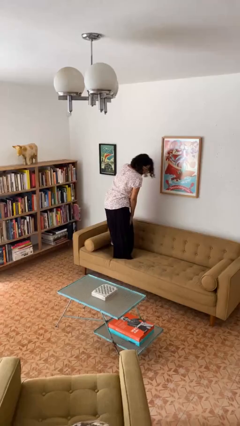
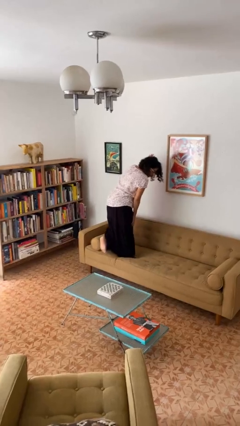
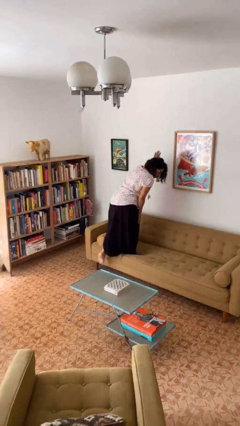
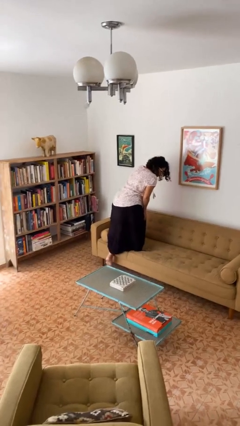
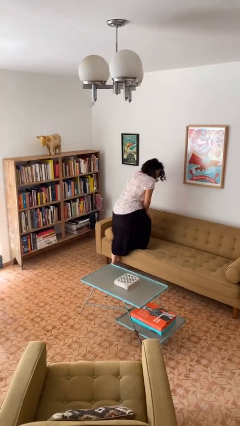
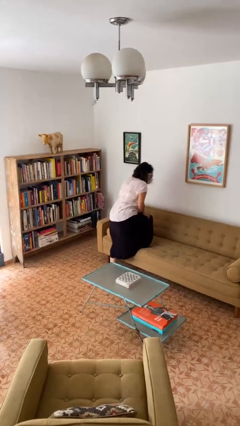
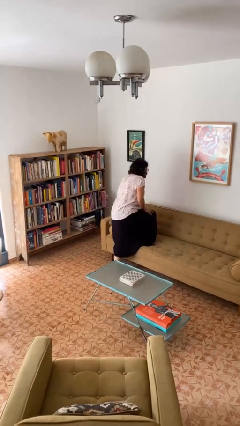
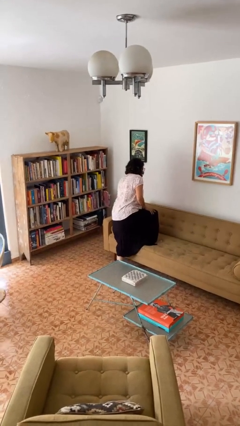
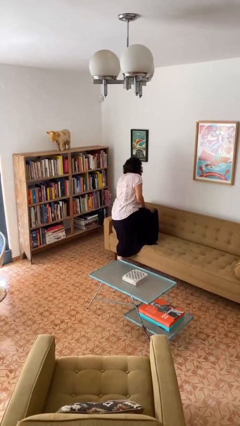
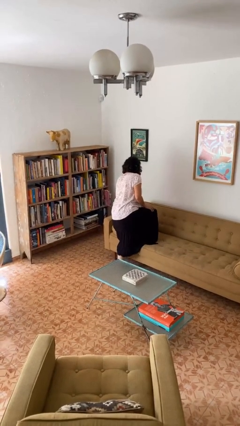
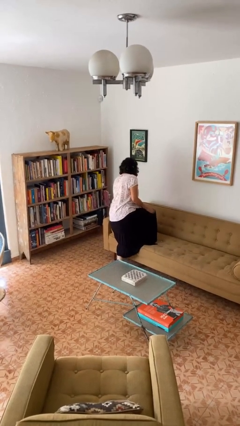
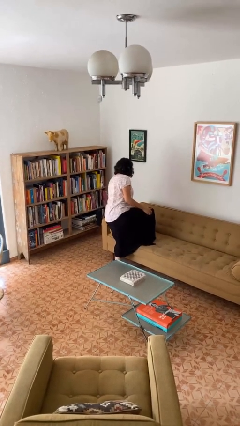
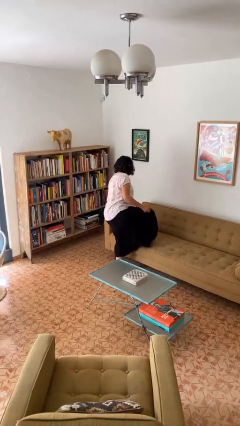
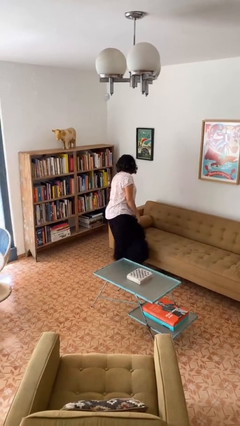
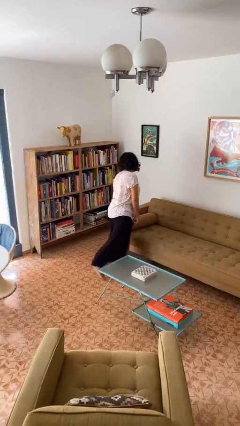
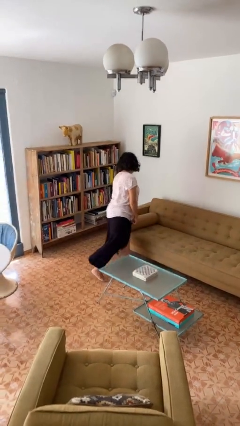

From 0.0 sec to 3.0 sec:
person climbs off couch

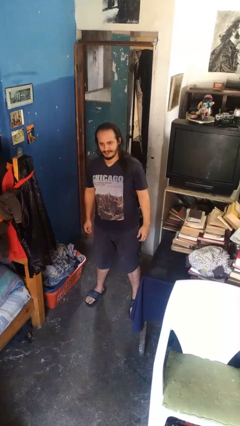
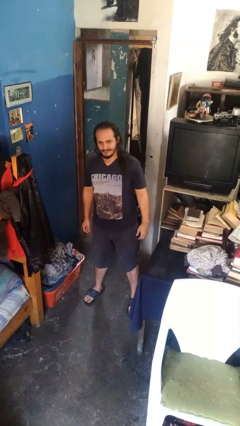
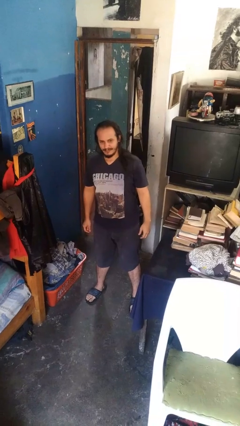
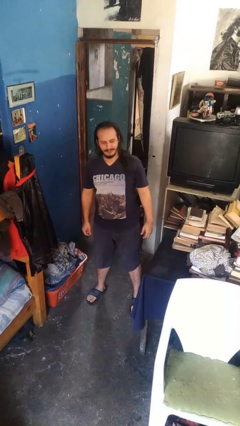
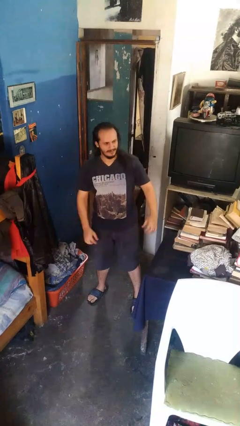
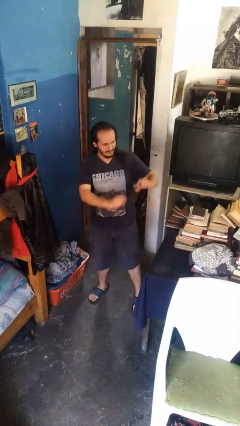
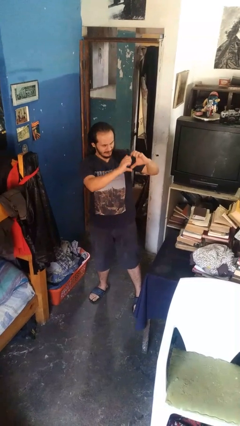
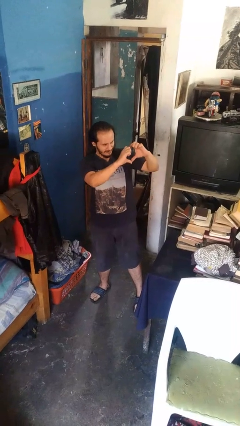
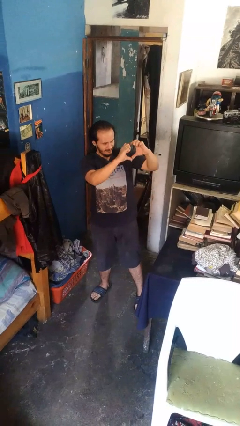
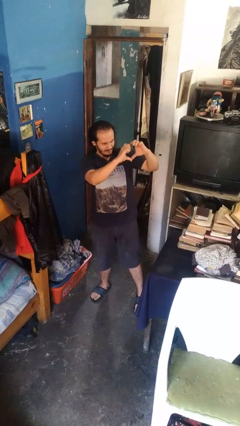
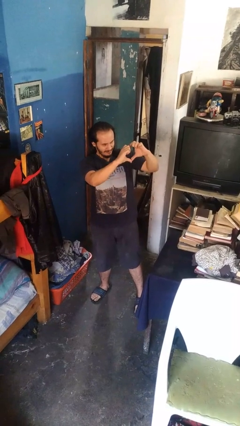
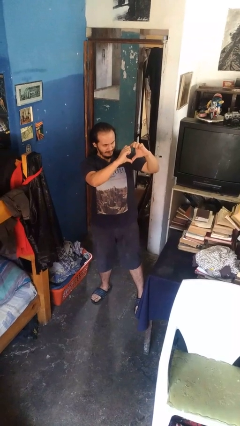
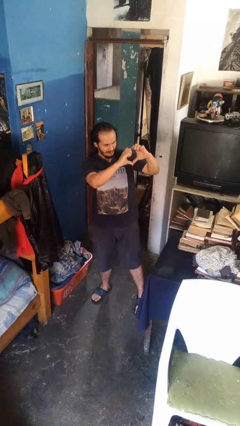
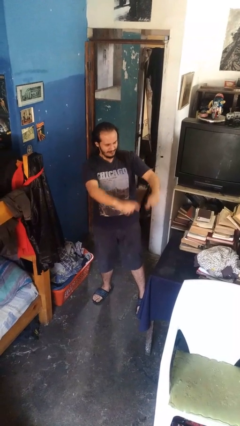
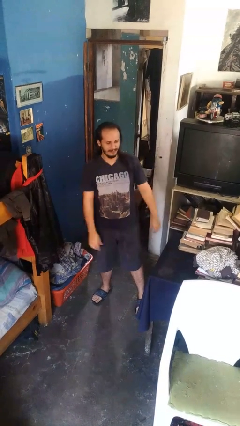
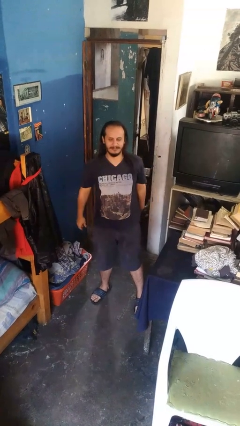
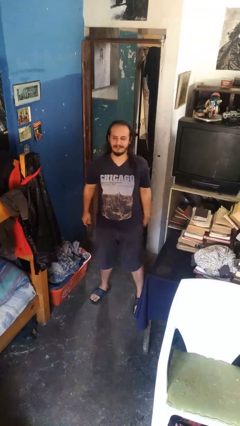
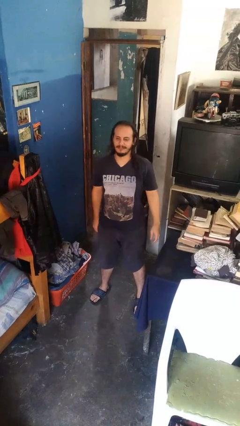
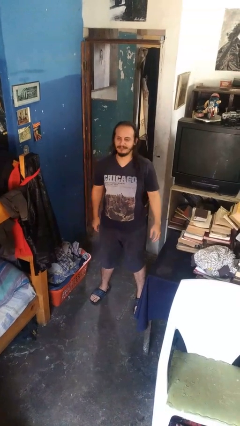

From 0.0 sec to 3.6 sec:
person gestures heart

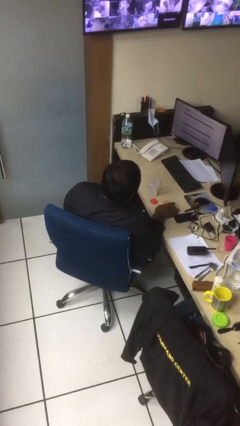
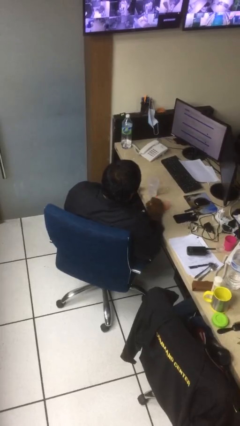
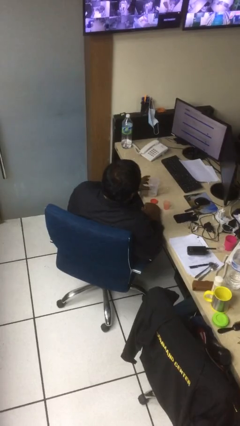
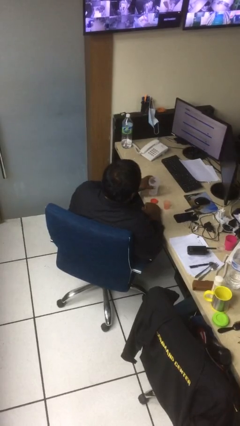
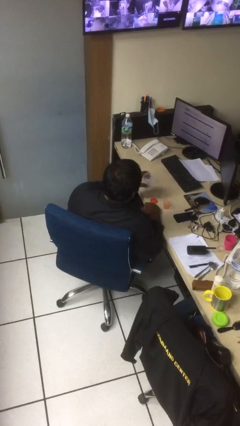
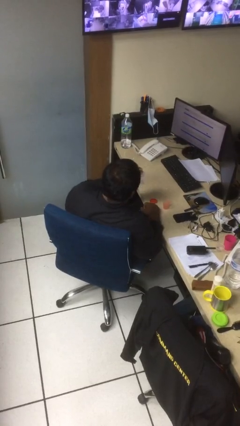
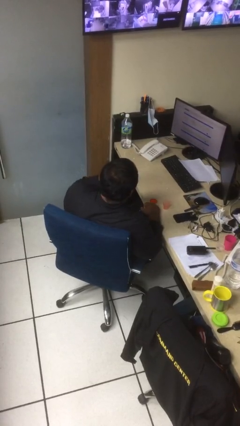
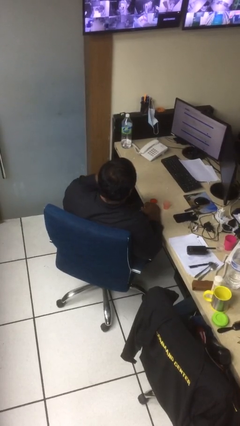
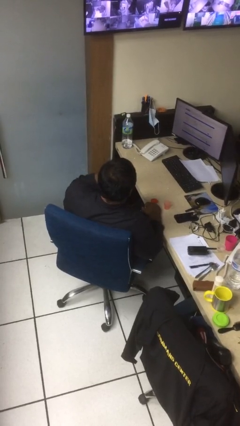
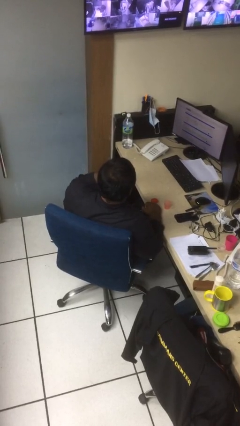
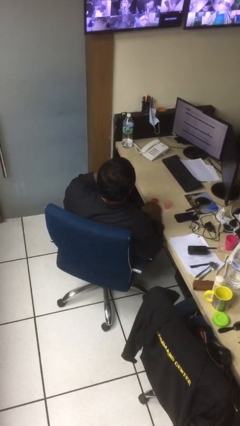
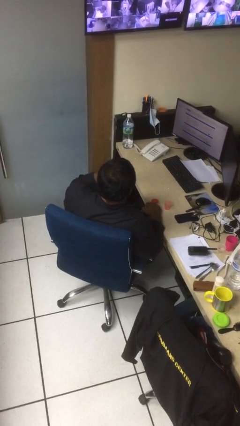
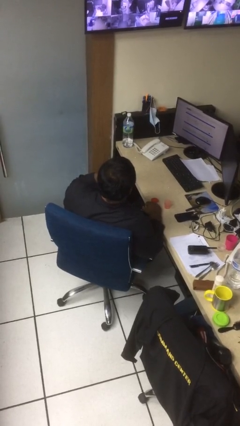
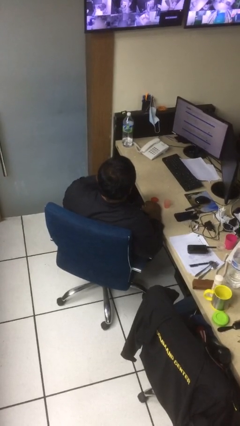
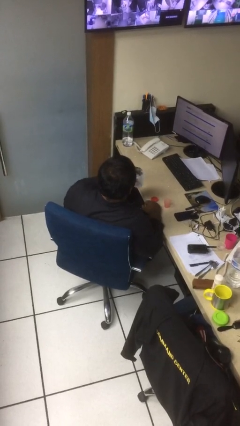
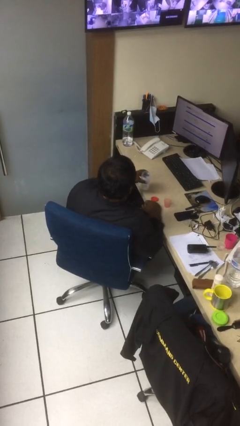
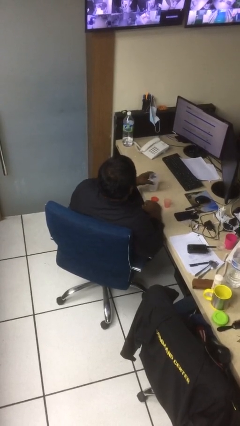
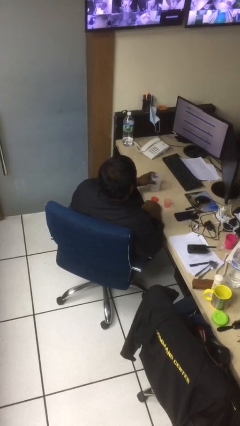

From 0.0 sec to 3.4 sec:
person drinks from cup

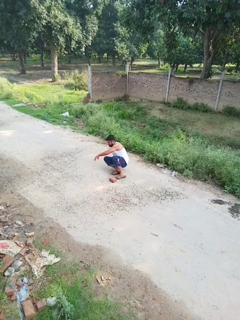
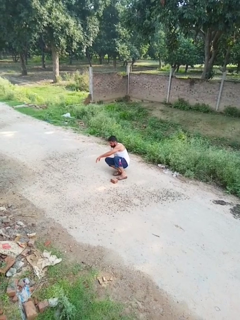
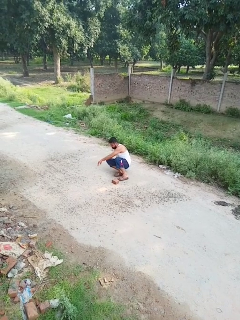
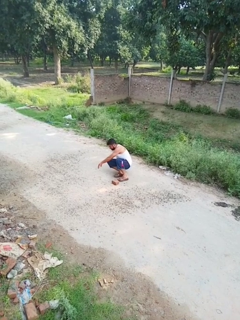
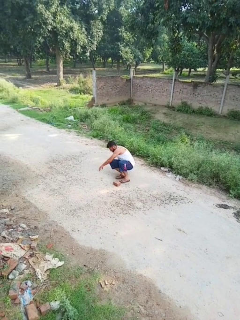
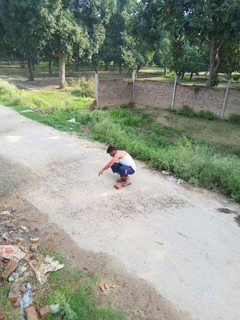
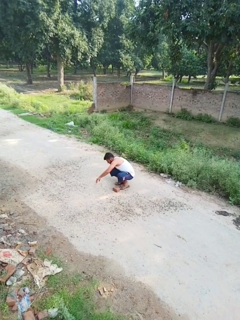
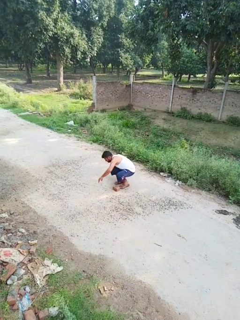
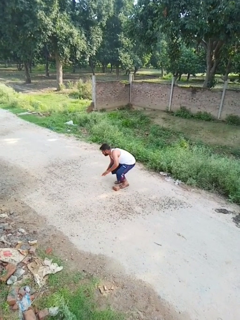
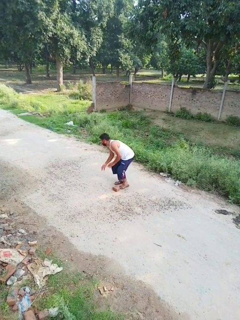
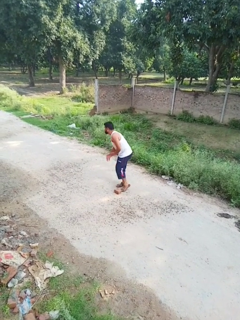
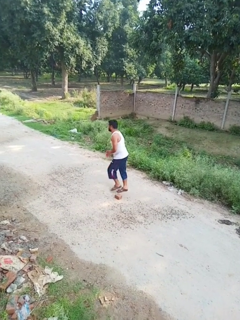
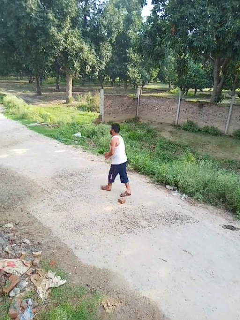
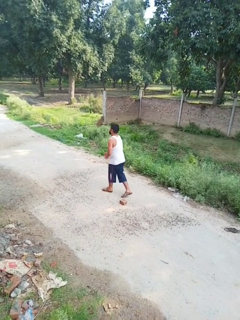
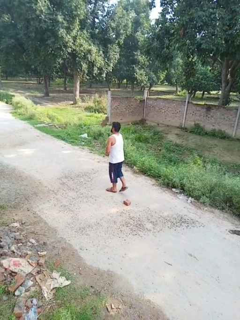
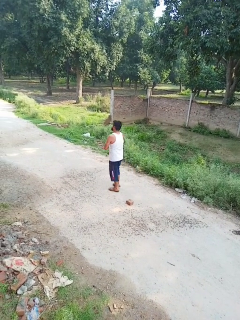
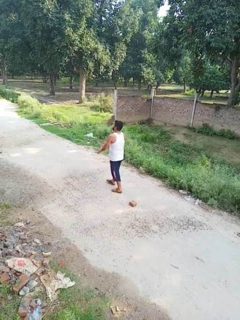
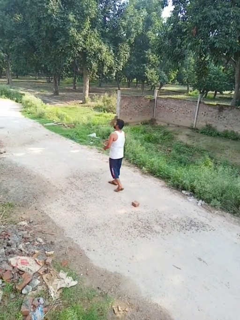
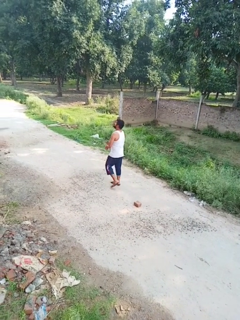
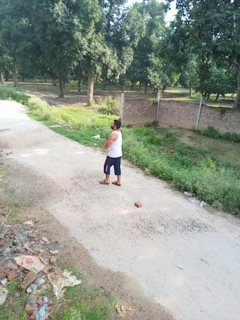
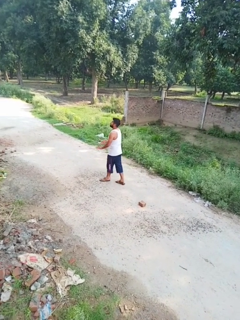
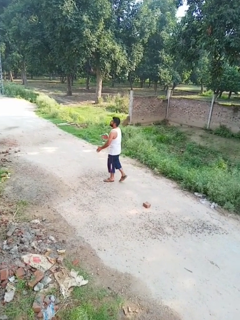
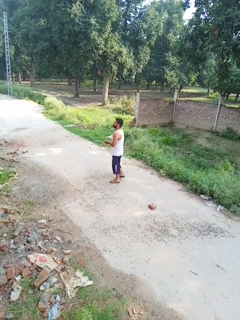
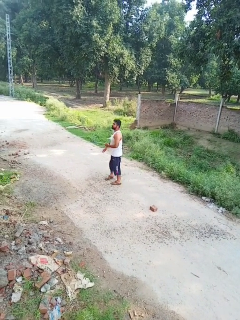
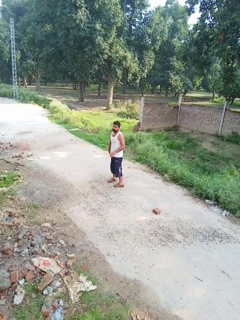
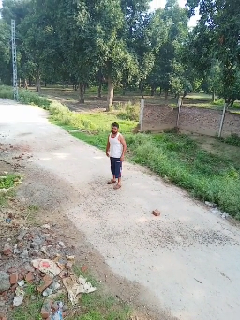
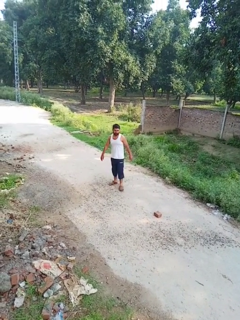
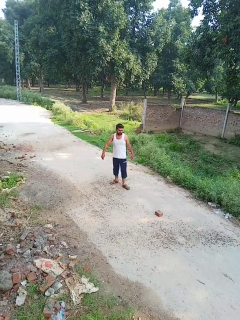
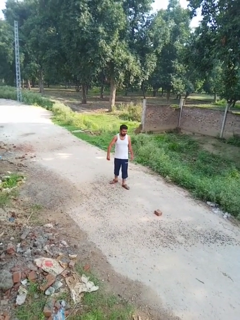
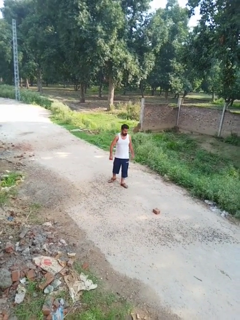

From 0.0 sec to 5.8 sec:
person stands up from floor

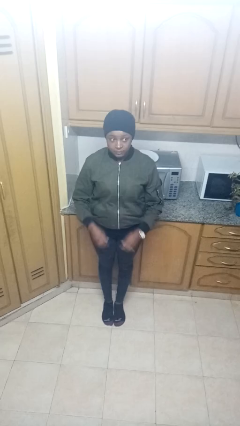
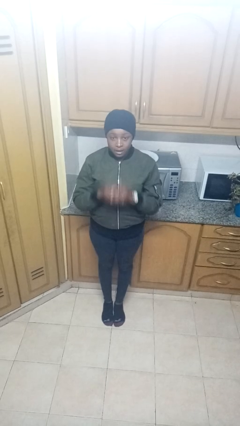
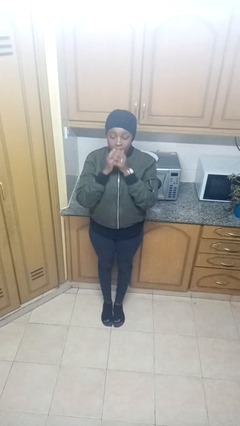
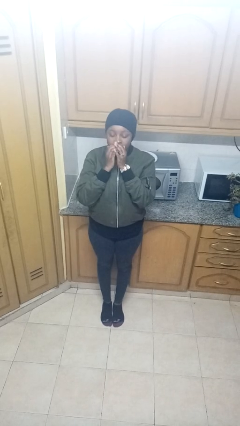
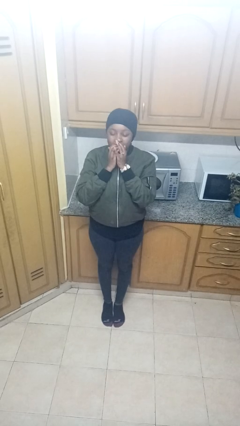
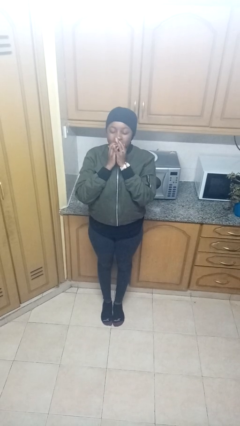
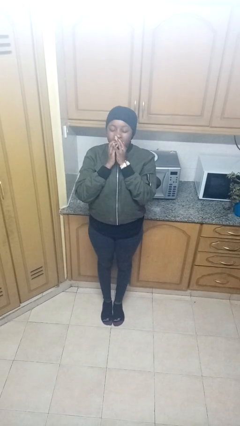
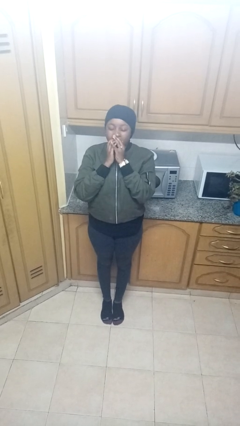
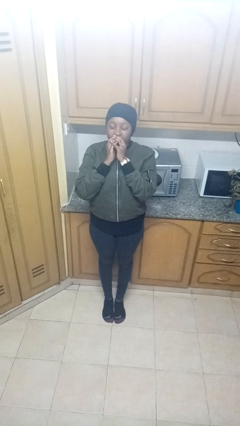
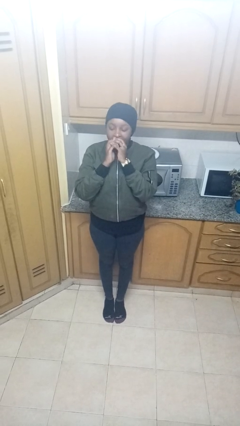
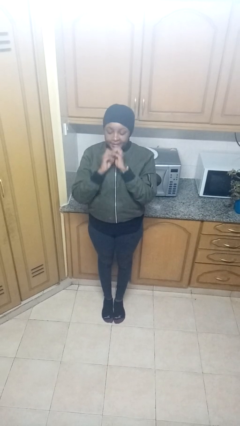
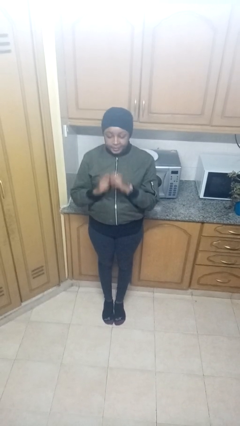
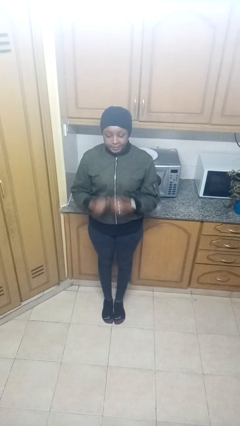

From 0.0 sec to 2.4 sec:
person yawns

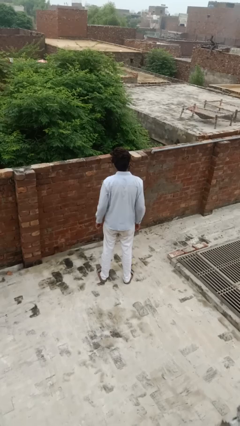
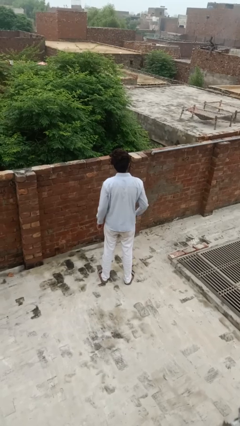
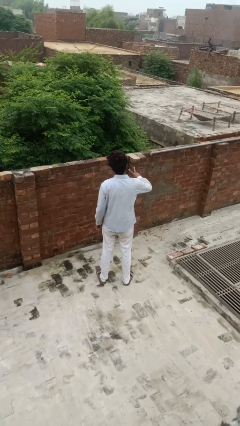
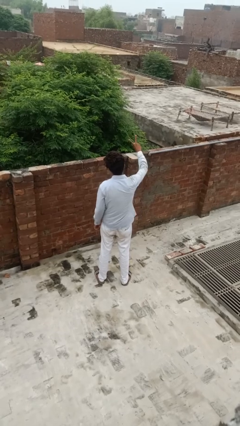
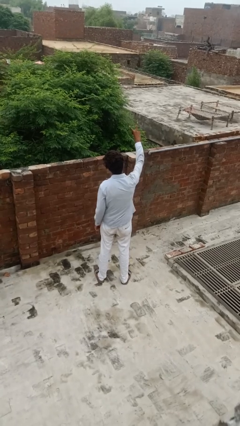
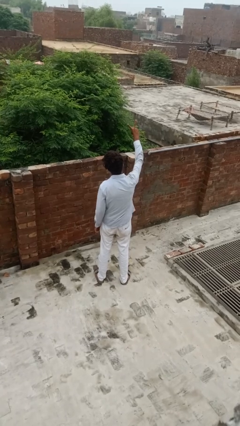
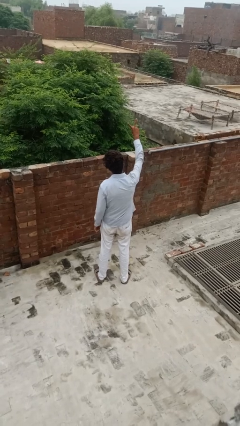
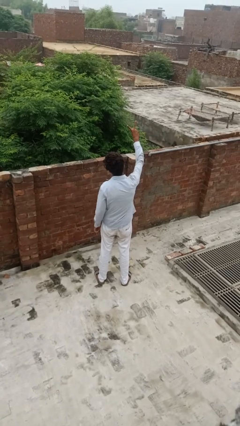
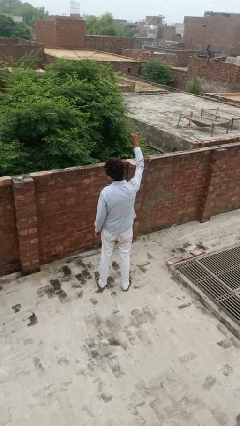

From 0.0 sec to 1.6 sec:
person gestures peace
